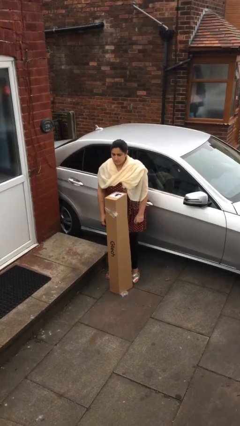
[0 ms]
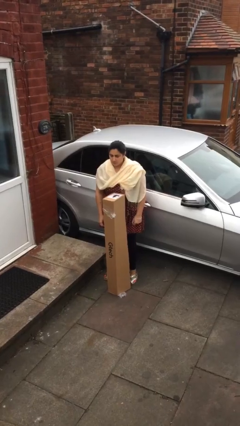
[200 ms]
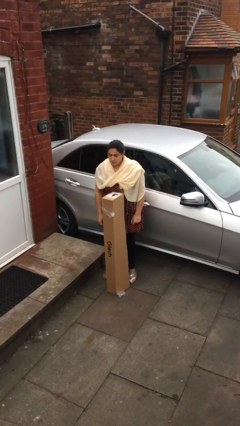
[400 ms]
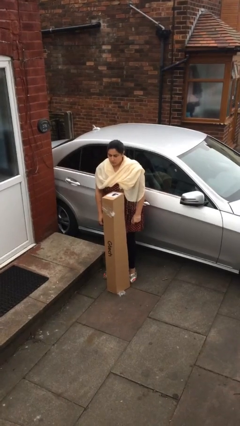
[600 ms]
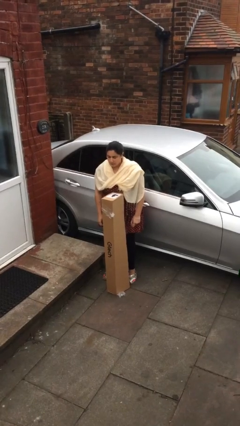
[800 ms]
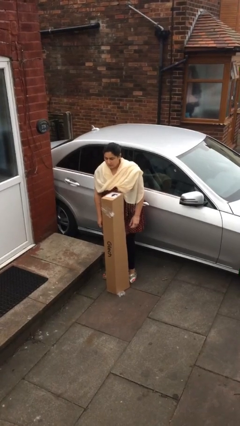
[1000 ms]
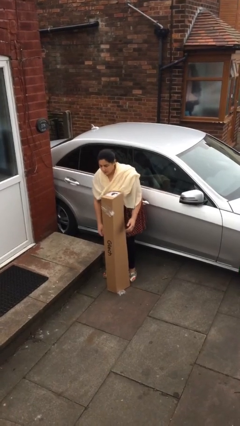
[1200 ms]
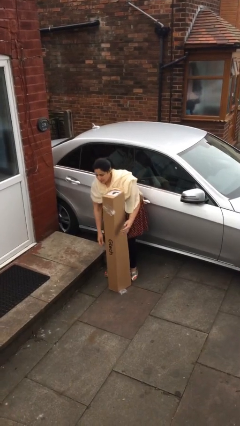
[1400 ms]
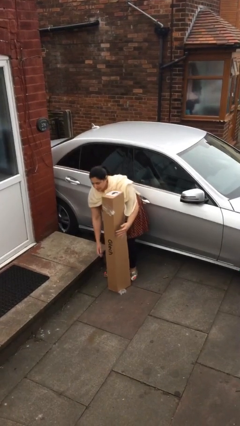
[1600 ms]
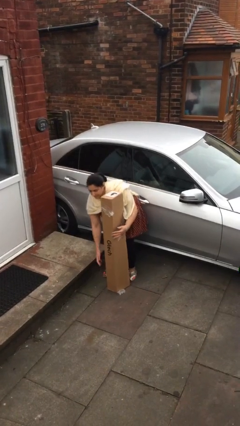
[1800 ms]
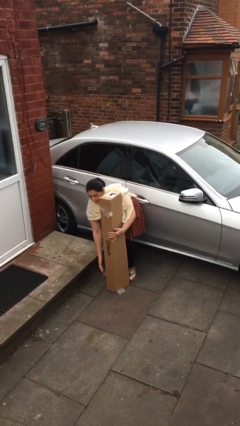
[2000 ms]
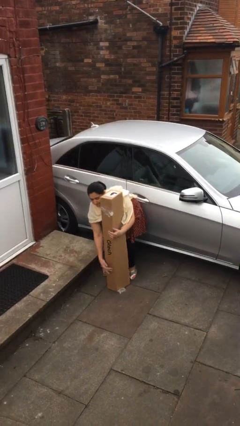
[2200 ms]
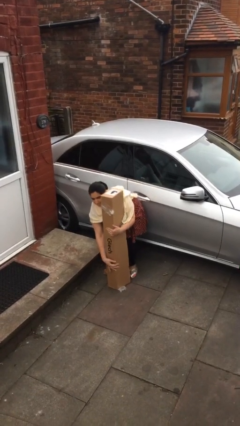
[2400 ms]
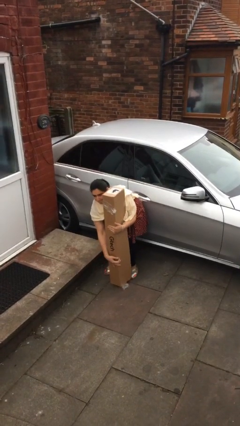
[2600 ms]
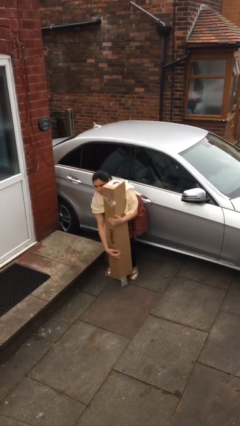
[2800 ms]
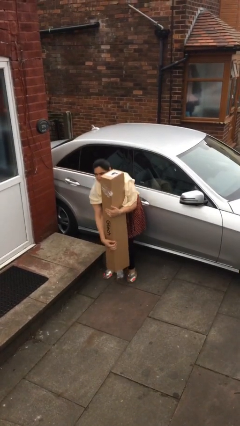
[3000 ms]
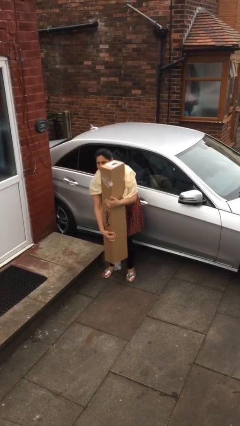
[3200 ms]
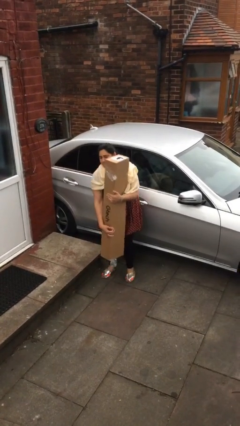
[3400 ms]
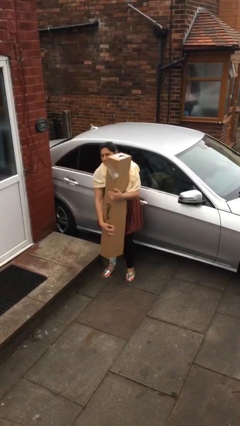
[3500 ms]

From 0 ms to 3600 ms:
person picks up object from floor

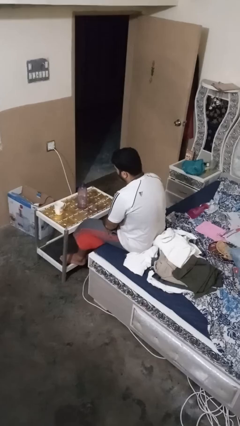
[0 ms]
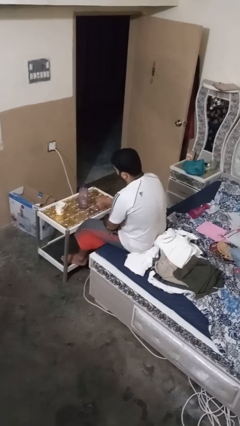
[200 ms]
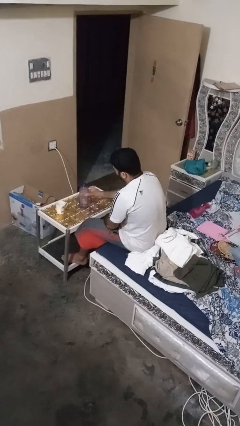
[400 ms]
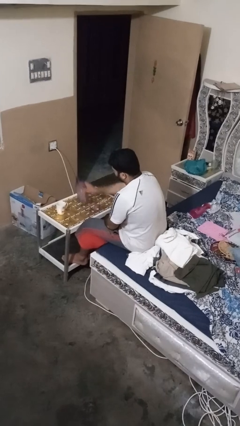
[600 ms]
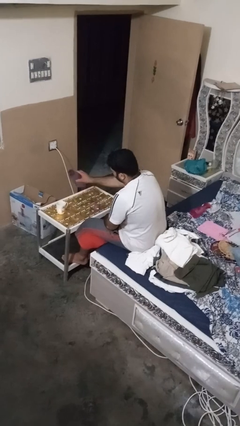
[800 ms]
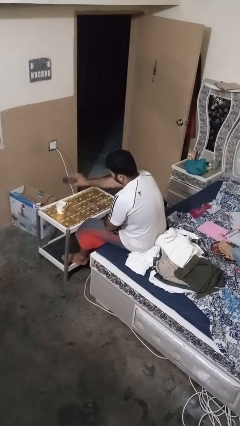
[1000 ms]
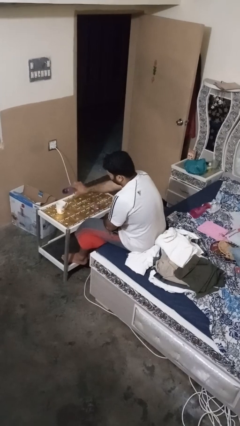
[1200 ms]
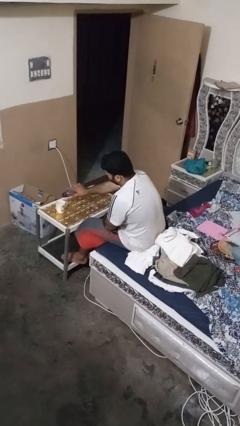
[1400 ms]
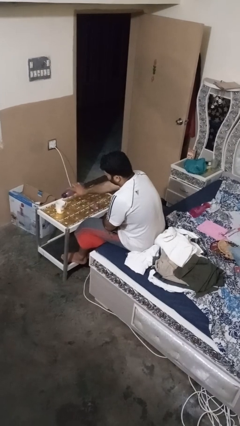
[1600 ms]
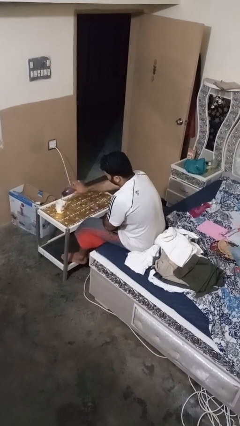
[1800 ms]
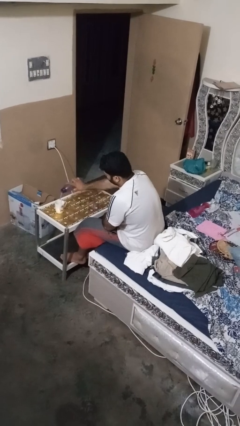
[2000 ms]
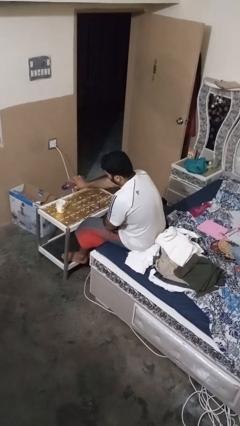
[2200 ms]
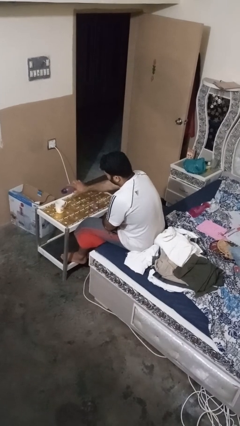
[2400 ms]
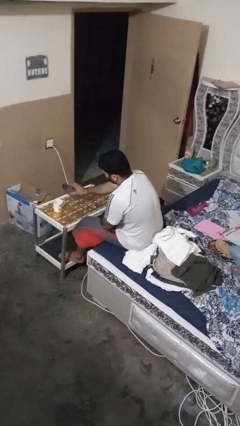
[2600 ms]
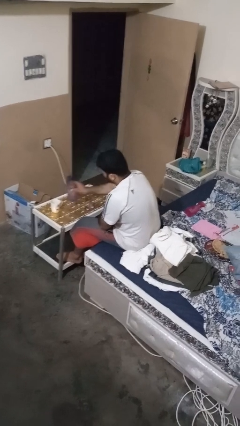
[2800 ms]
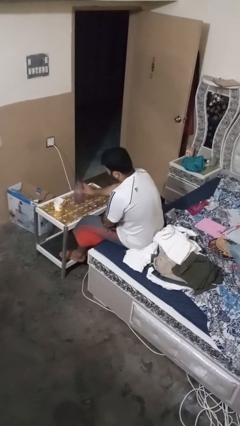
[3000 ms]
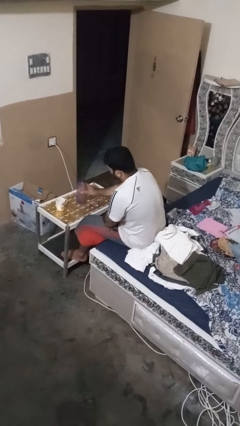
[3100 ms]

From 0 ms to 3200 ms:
person pours liquid into cup

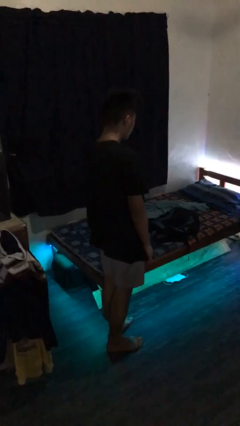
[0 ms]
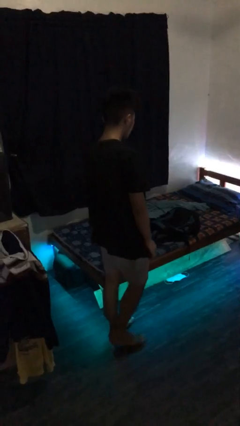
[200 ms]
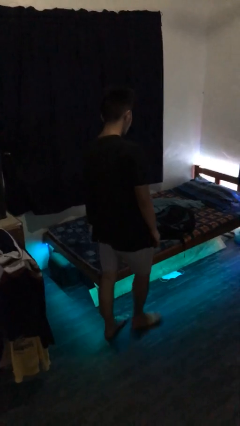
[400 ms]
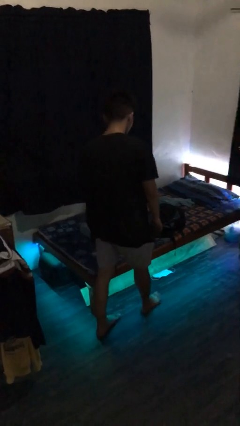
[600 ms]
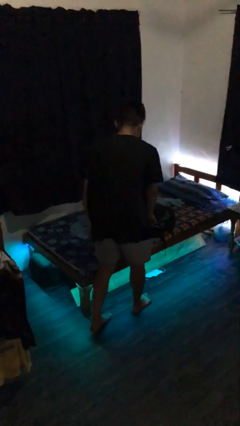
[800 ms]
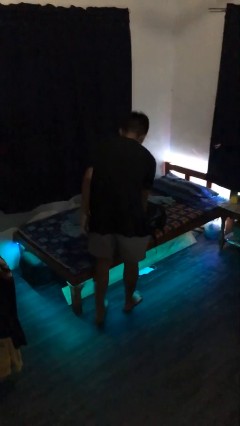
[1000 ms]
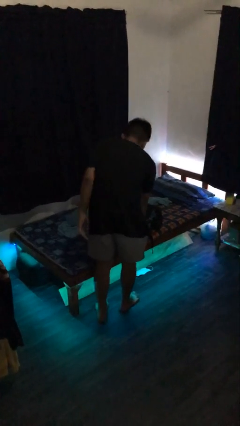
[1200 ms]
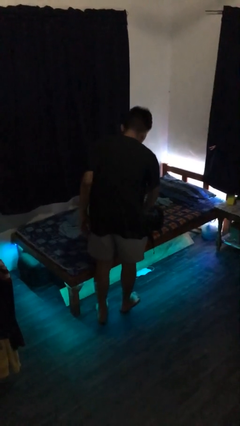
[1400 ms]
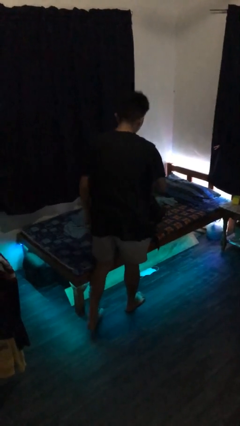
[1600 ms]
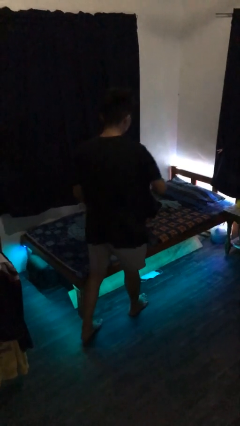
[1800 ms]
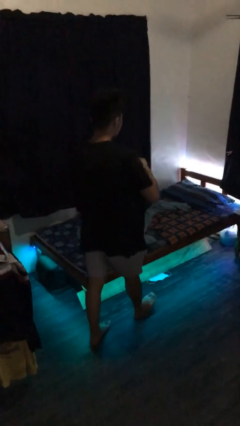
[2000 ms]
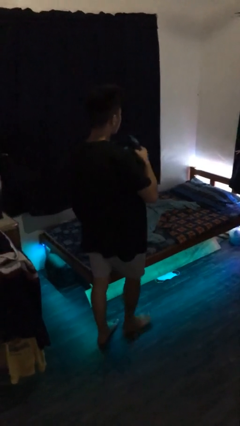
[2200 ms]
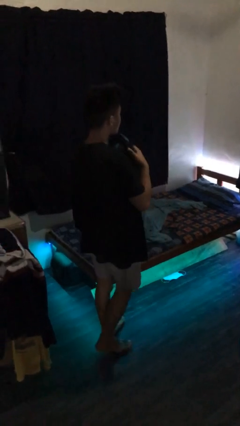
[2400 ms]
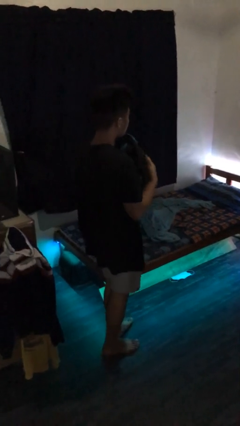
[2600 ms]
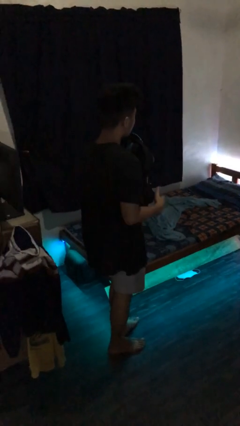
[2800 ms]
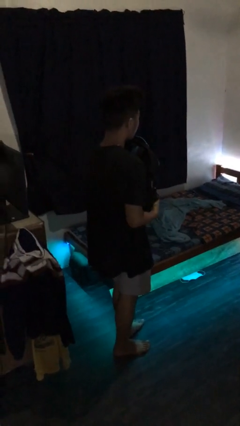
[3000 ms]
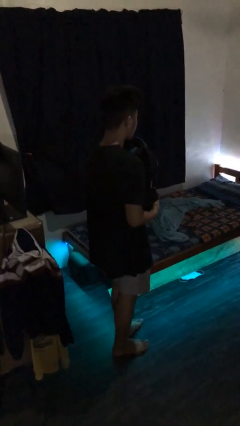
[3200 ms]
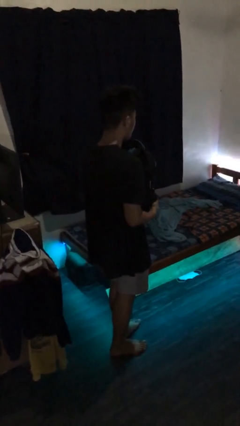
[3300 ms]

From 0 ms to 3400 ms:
person picks up object from bed

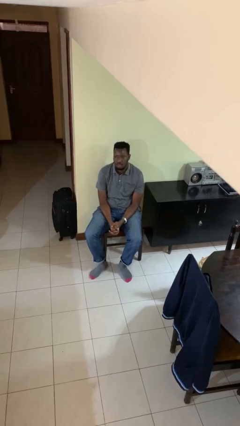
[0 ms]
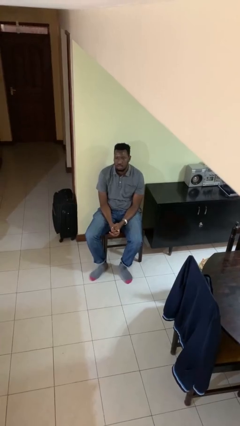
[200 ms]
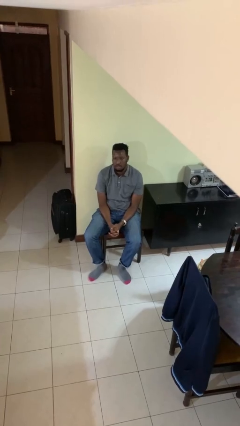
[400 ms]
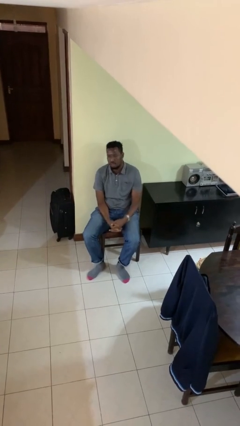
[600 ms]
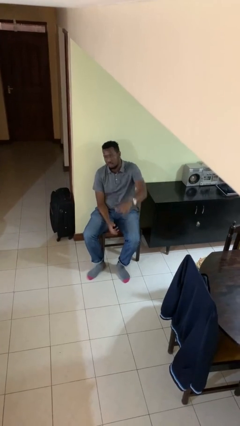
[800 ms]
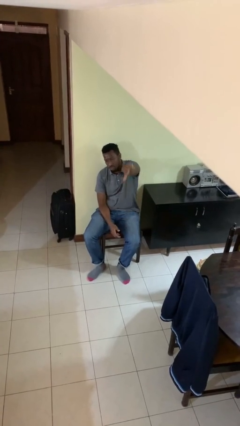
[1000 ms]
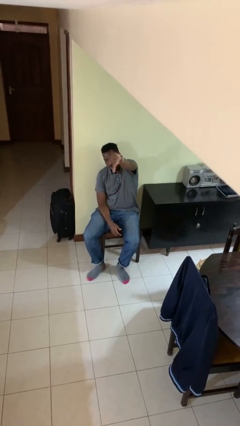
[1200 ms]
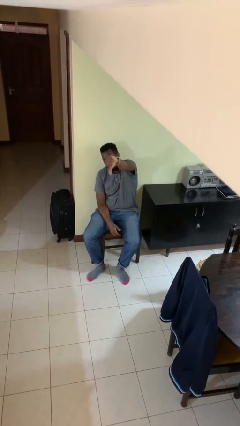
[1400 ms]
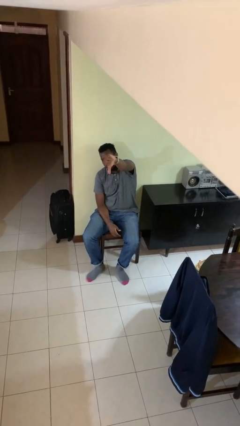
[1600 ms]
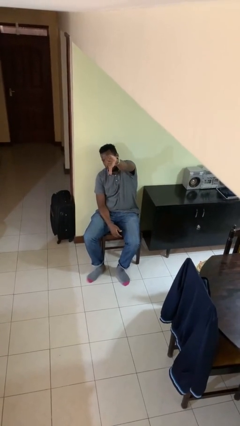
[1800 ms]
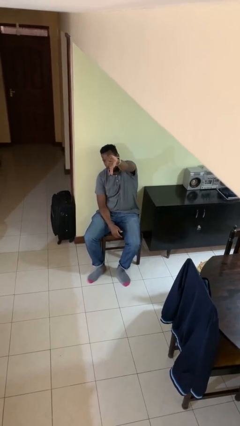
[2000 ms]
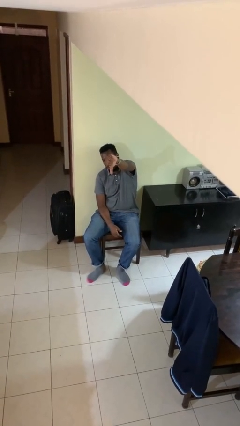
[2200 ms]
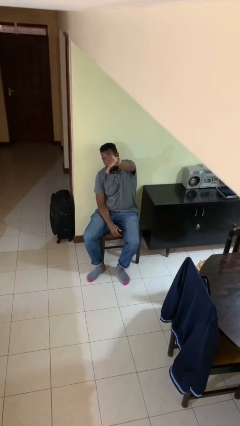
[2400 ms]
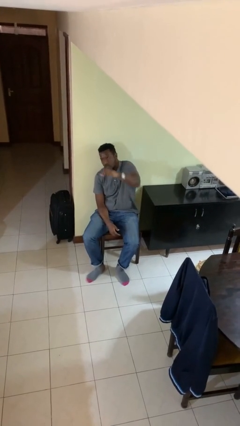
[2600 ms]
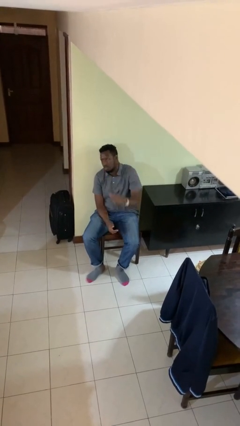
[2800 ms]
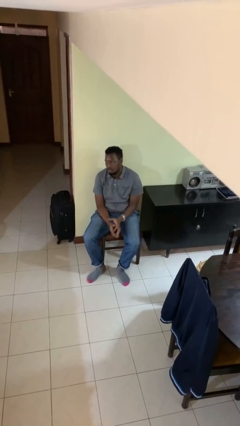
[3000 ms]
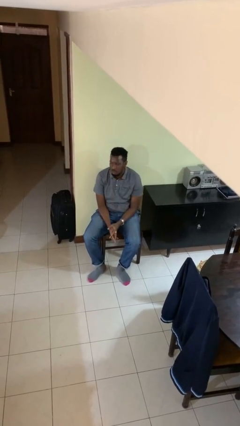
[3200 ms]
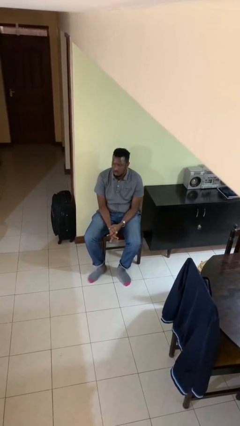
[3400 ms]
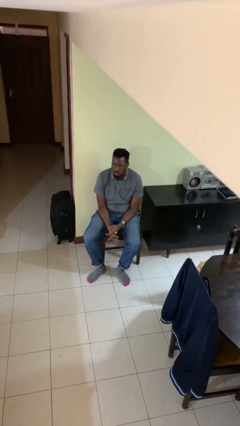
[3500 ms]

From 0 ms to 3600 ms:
person gestures thumbs down

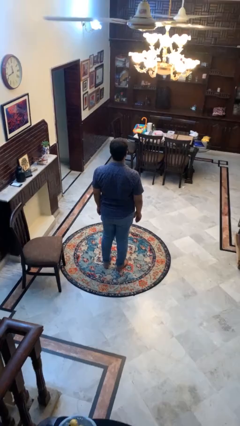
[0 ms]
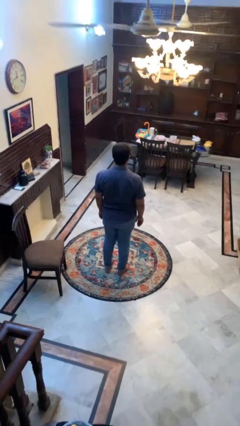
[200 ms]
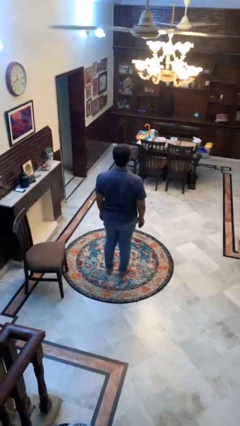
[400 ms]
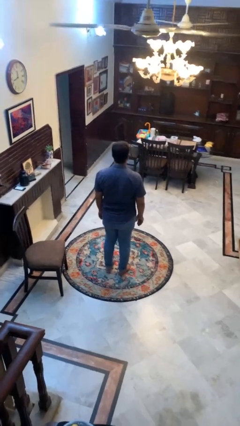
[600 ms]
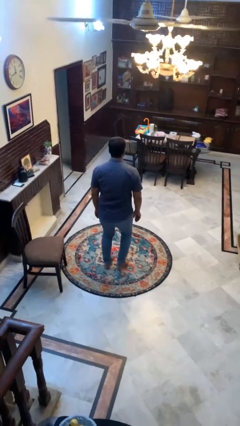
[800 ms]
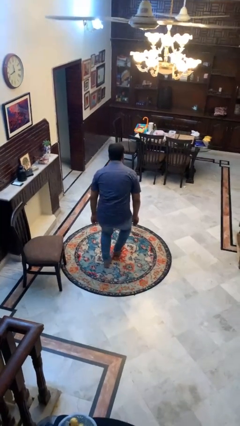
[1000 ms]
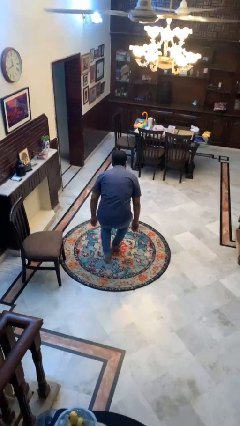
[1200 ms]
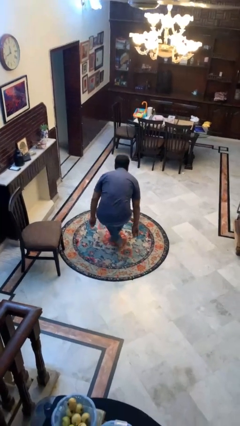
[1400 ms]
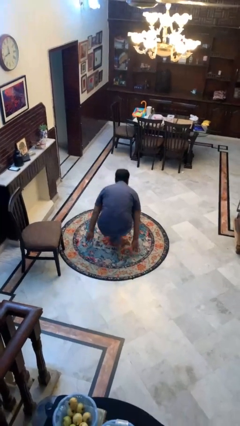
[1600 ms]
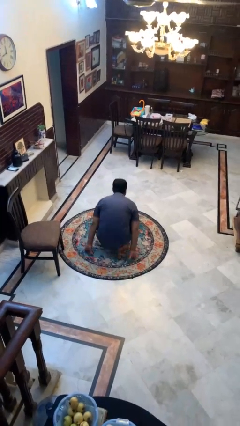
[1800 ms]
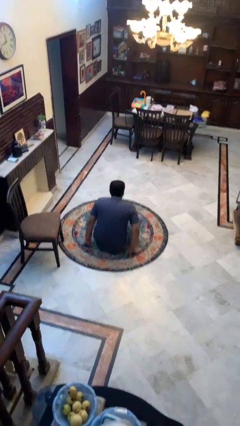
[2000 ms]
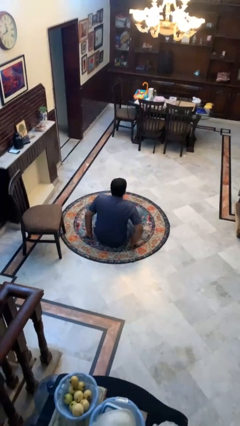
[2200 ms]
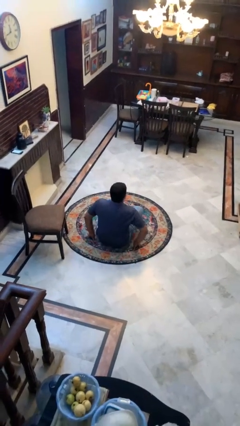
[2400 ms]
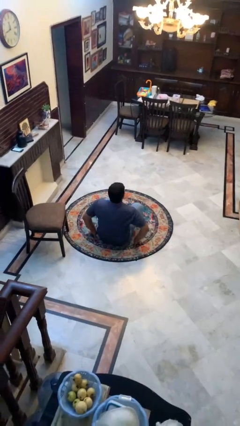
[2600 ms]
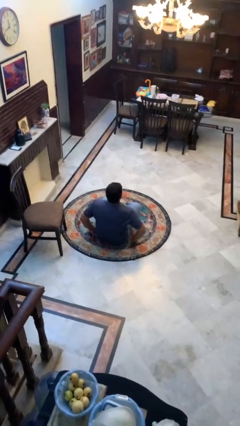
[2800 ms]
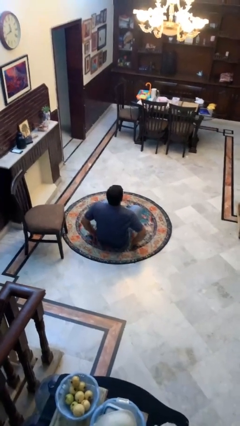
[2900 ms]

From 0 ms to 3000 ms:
person sits crisscross

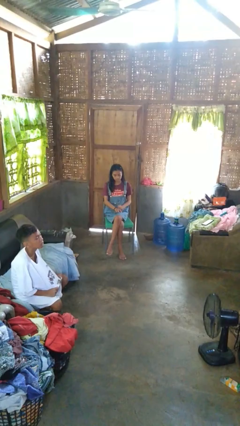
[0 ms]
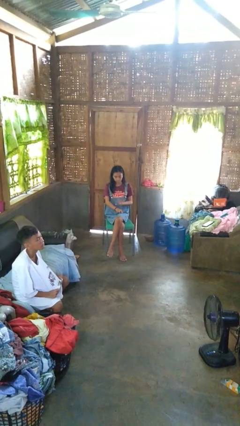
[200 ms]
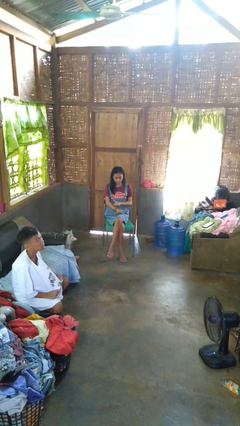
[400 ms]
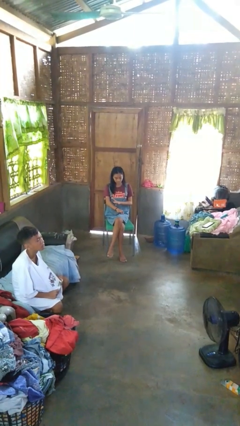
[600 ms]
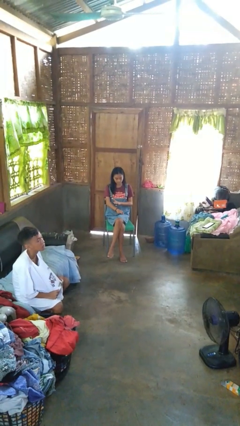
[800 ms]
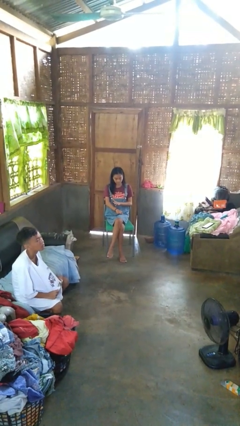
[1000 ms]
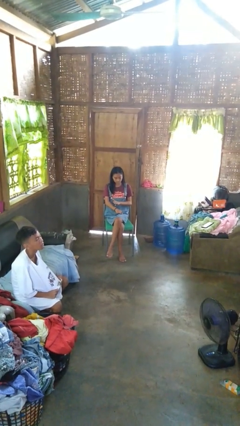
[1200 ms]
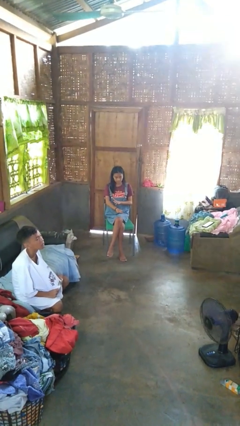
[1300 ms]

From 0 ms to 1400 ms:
person swats bug
